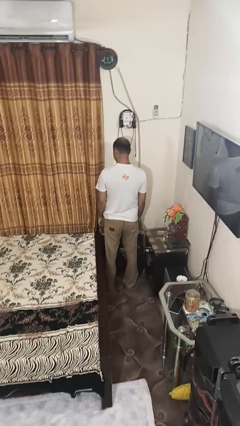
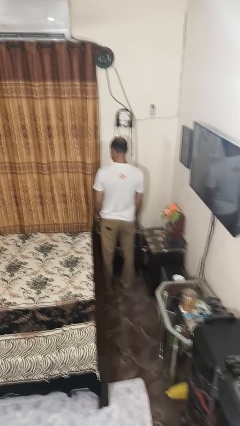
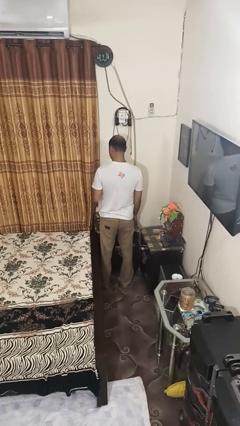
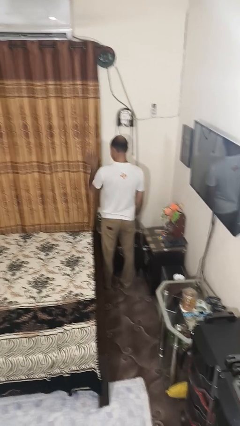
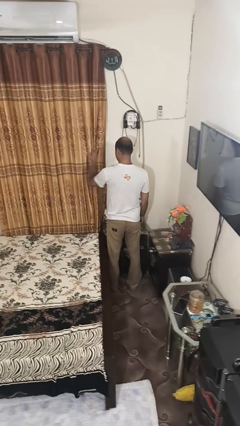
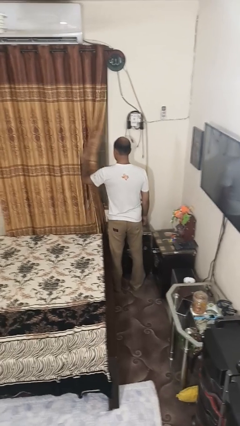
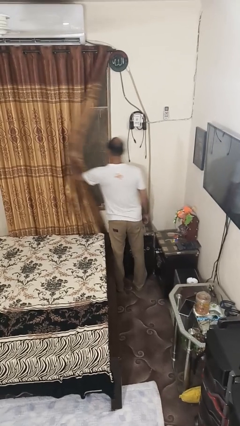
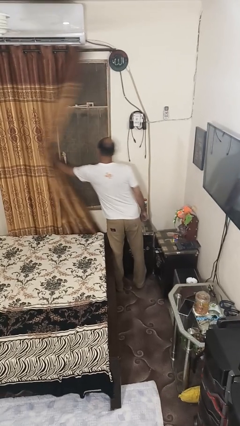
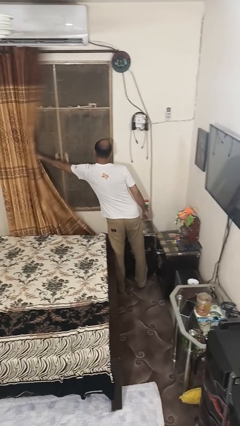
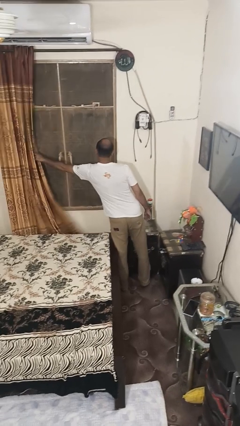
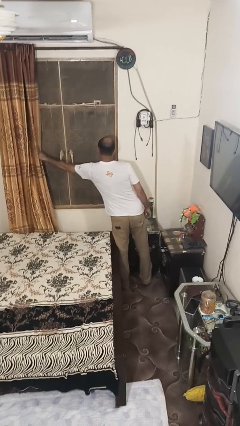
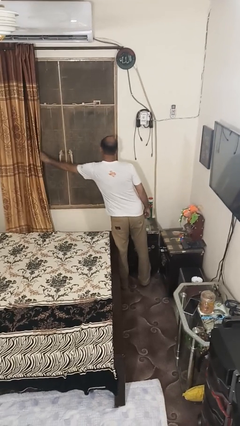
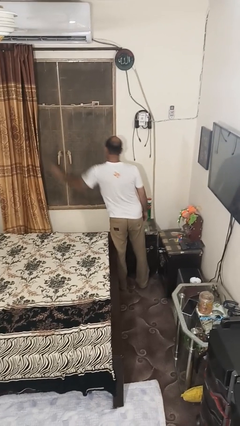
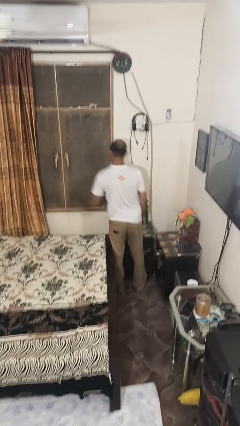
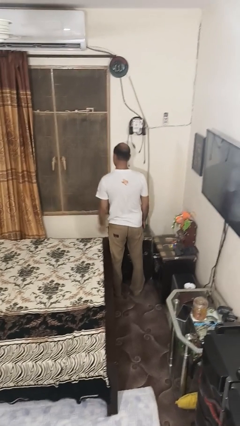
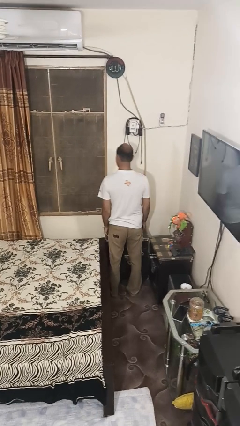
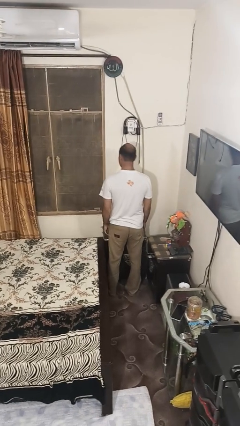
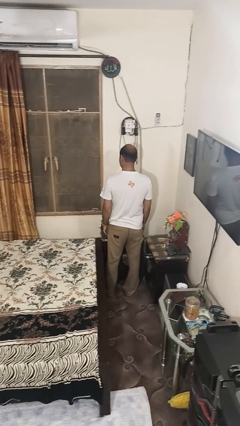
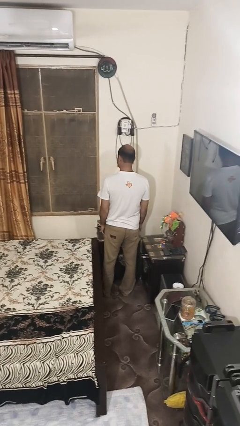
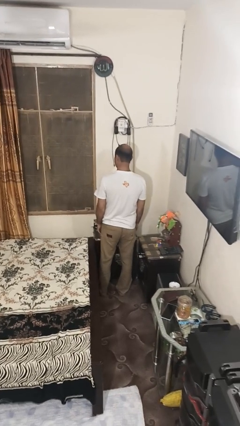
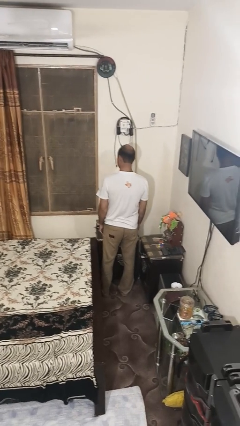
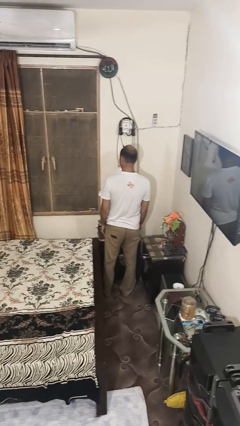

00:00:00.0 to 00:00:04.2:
person opens curtains

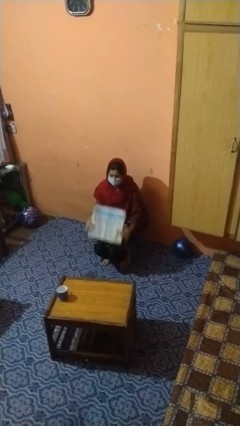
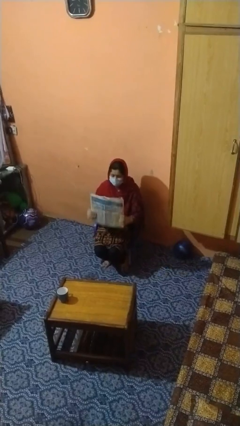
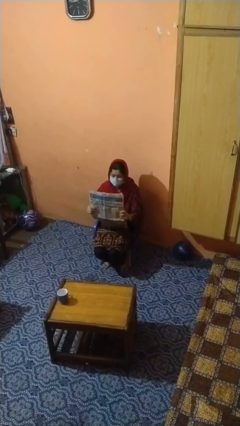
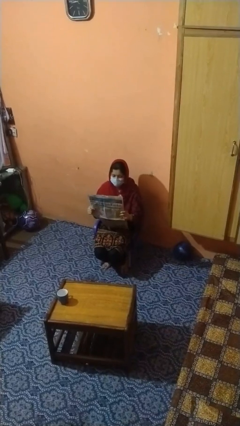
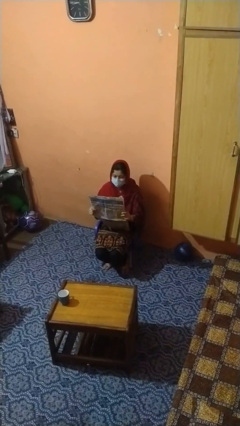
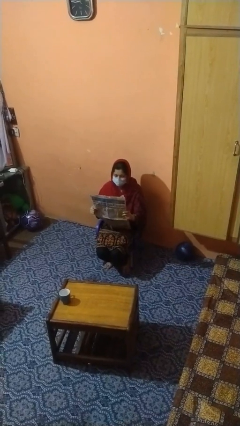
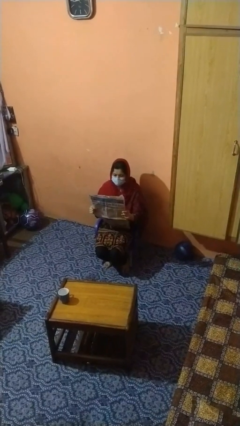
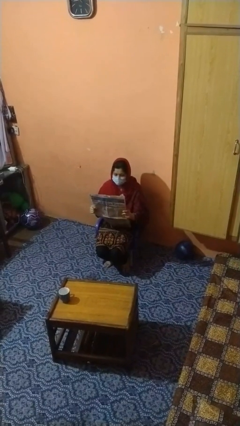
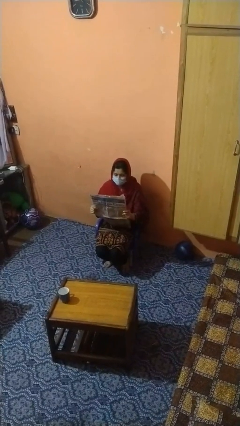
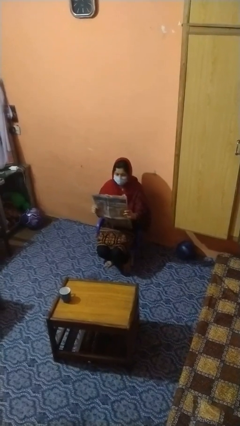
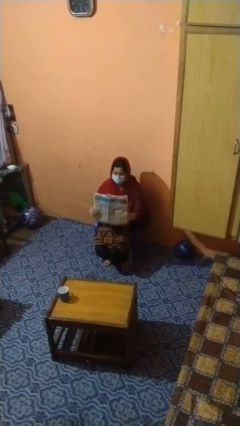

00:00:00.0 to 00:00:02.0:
person reads newspaper

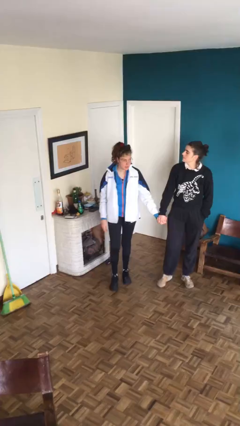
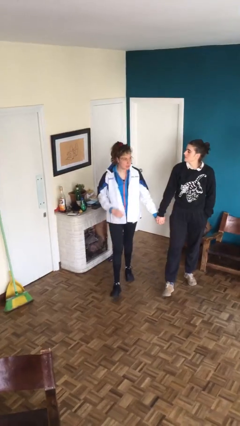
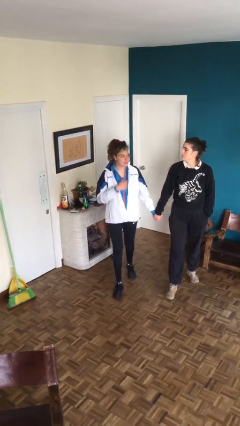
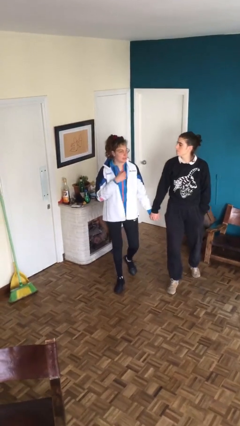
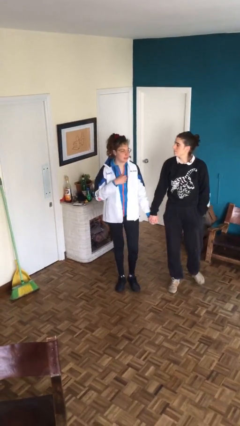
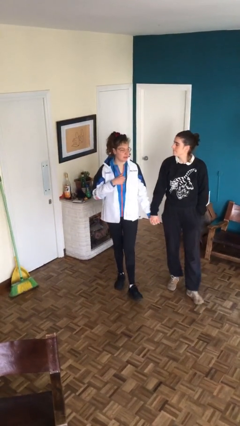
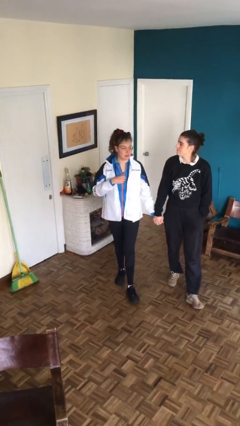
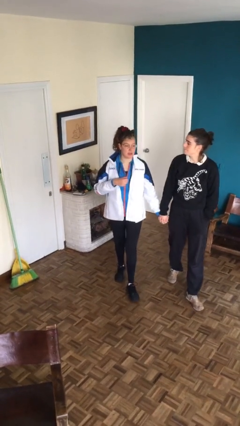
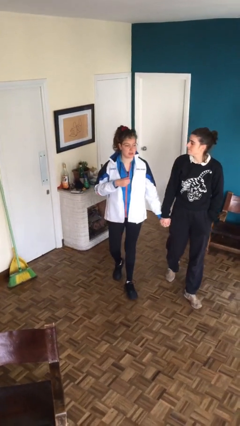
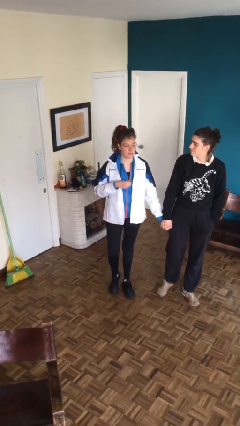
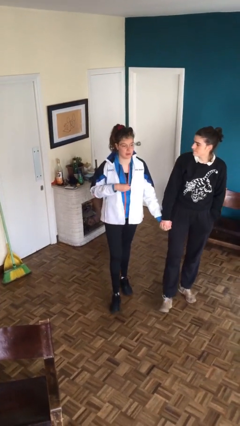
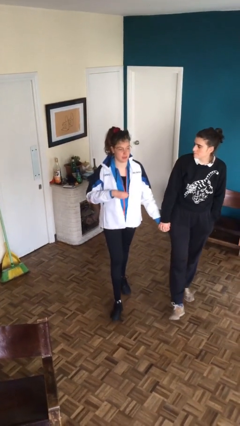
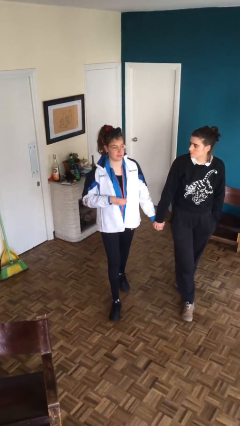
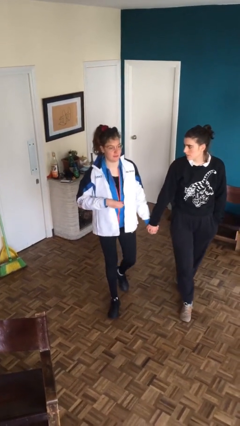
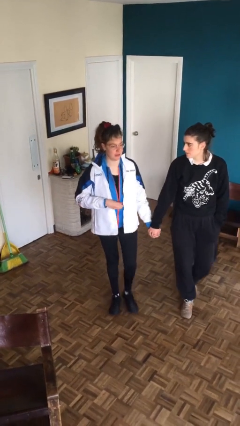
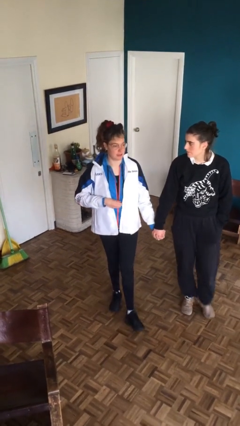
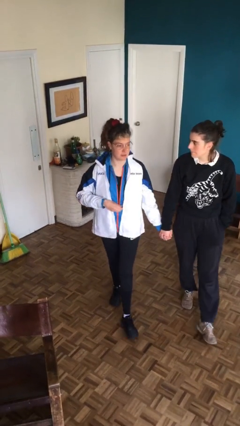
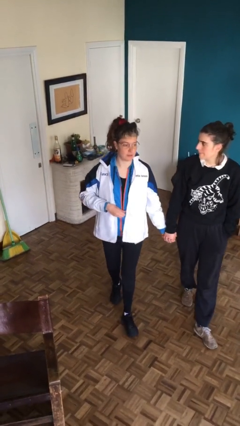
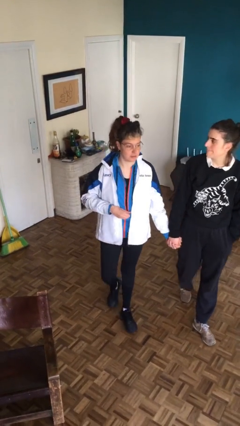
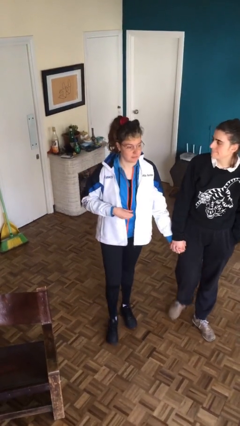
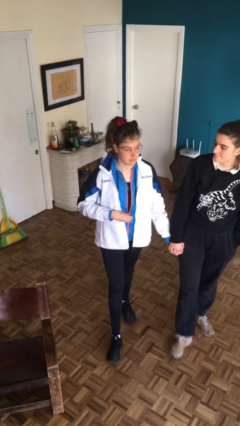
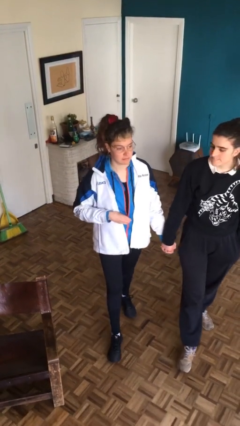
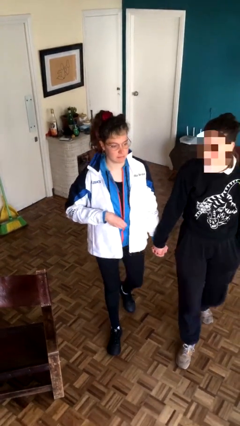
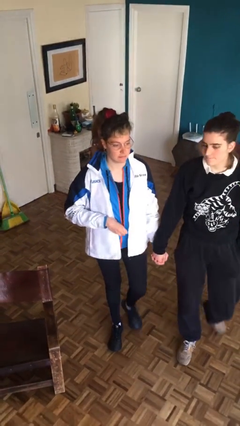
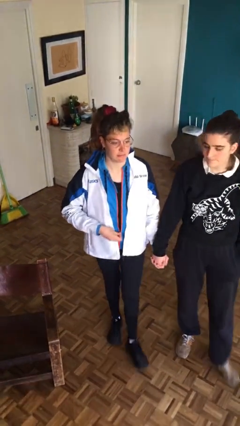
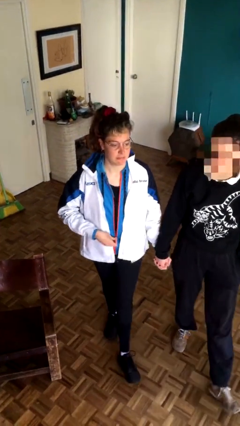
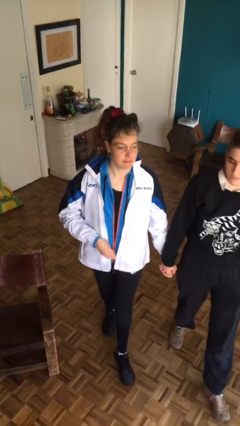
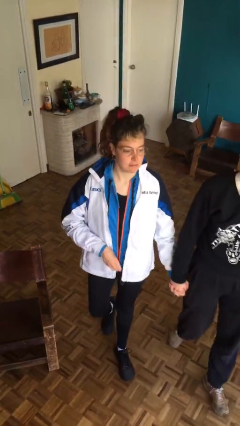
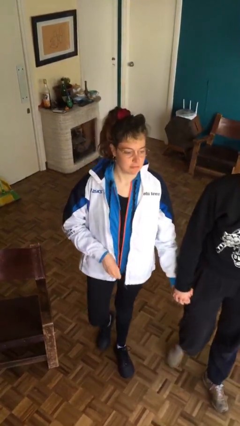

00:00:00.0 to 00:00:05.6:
person holds hand

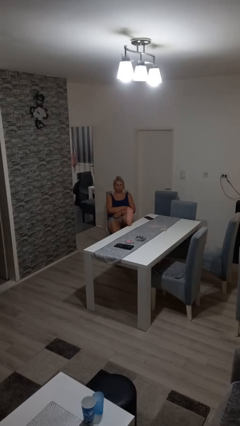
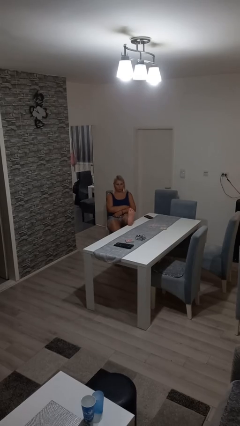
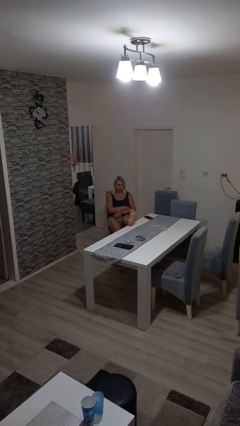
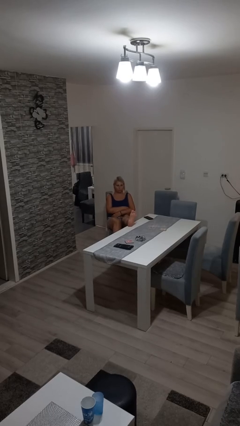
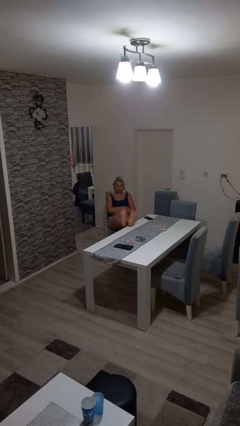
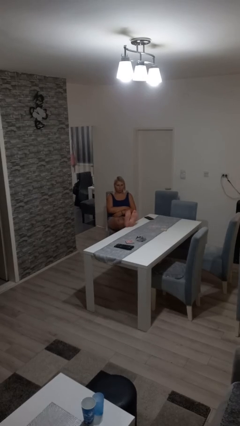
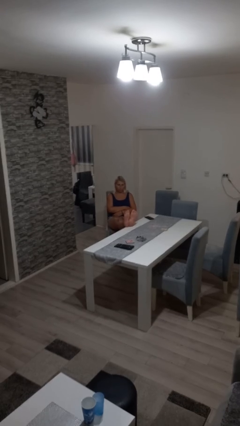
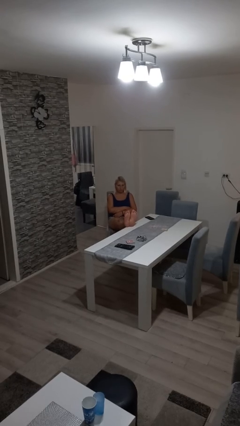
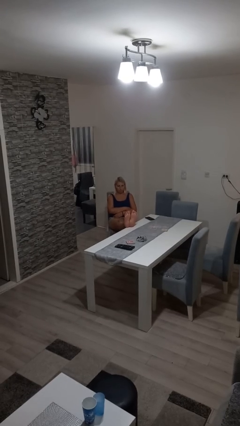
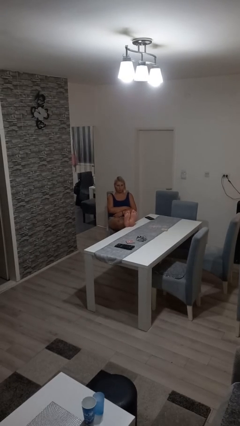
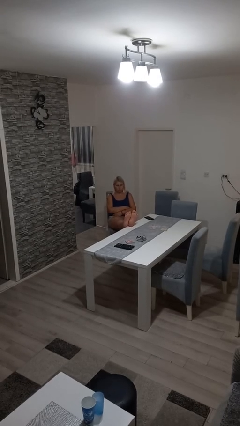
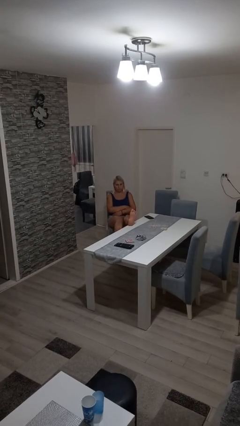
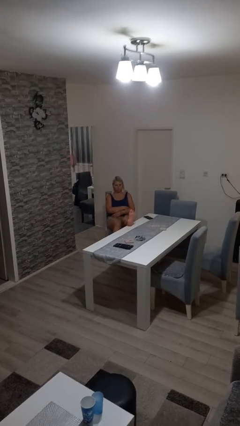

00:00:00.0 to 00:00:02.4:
person puts feet up

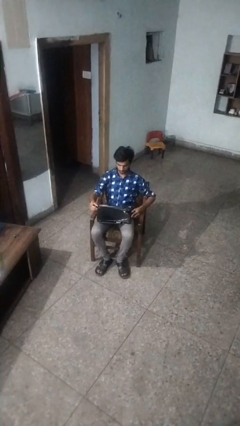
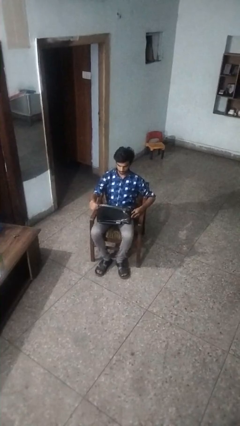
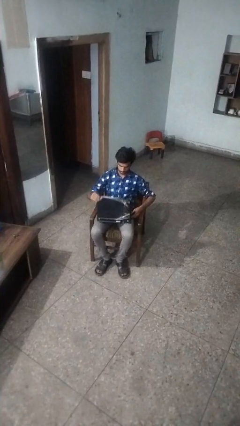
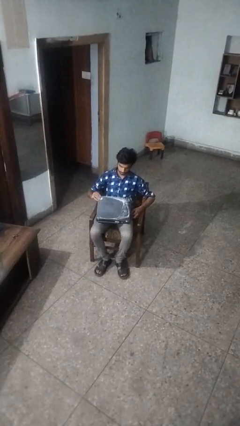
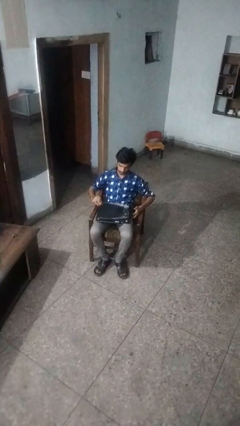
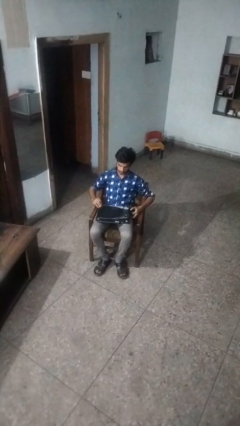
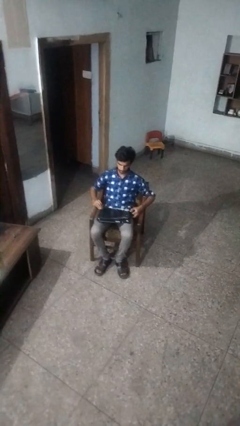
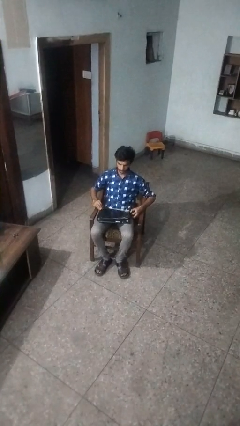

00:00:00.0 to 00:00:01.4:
person closes laptop

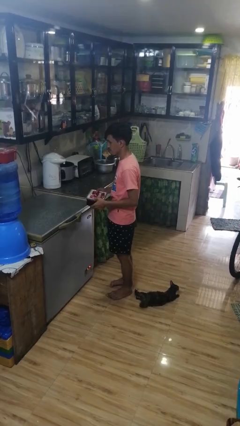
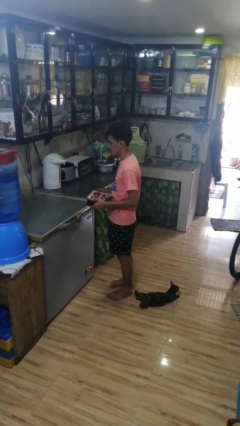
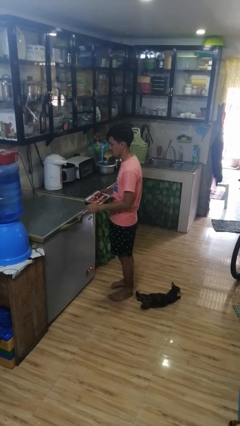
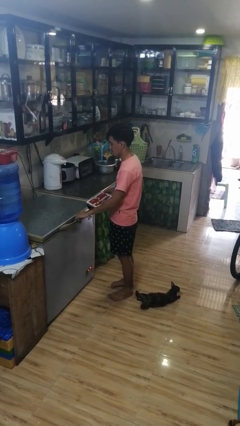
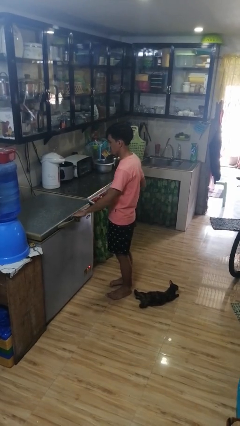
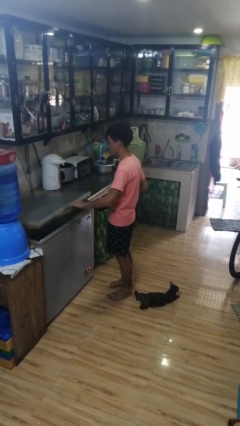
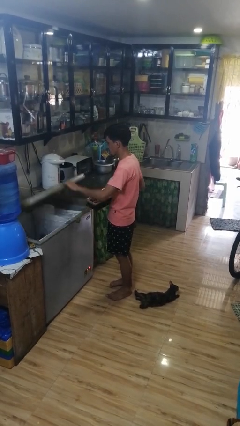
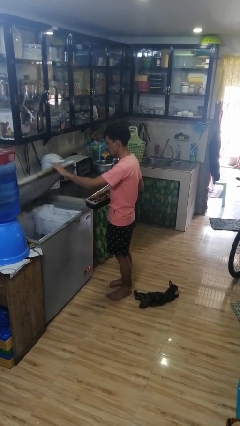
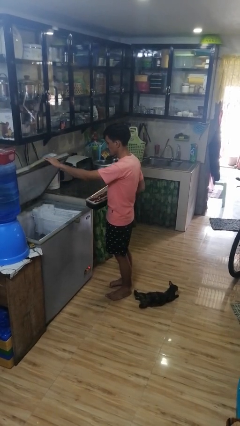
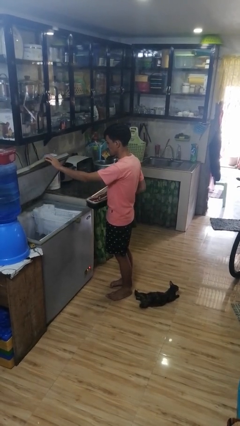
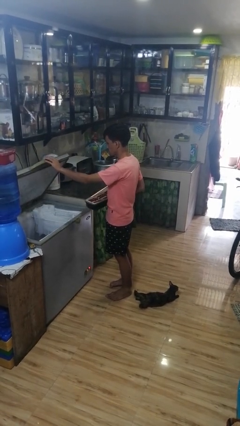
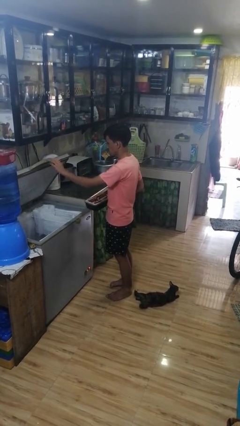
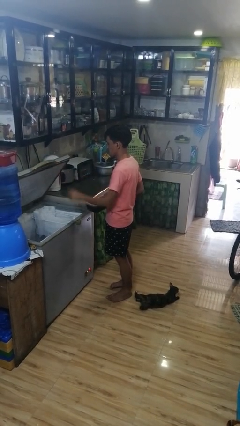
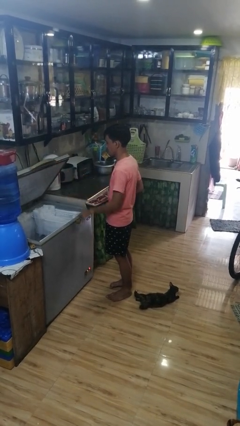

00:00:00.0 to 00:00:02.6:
person opens refrigerator
